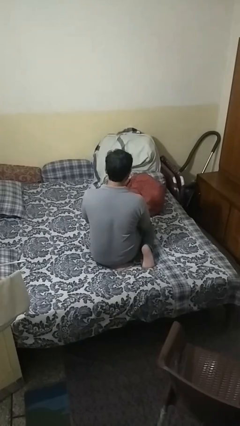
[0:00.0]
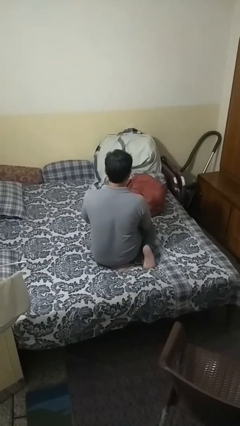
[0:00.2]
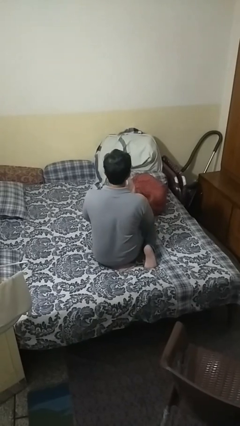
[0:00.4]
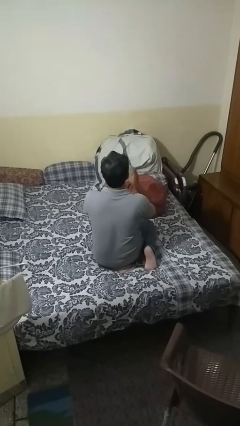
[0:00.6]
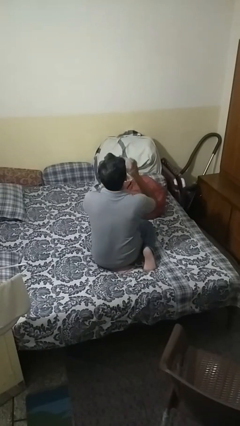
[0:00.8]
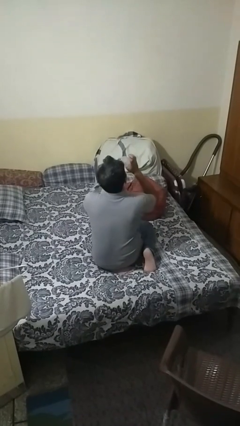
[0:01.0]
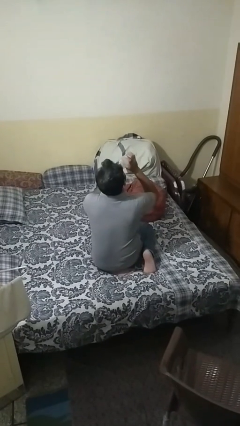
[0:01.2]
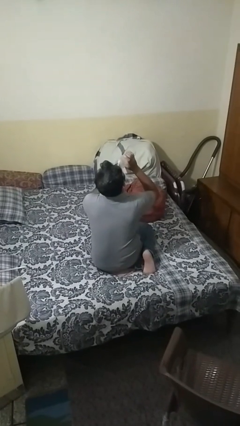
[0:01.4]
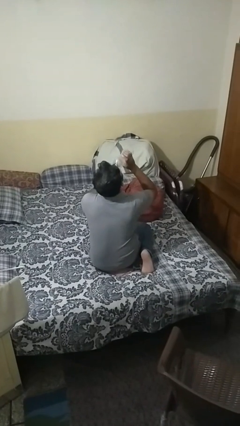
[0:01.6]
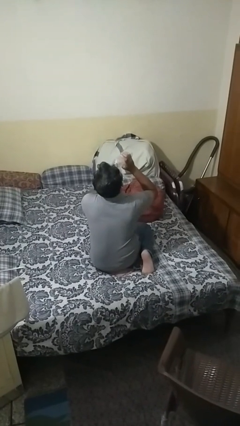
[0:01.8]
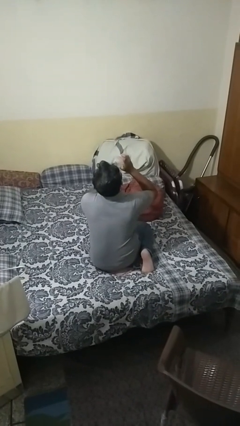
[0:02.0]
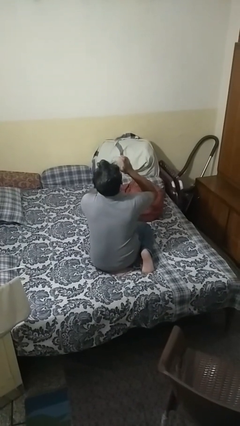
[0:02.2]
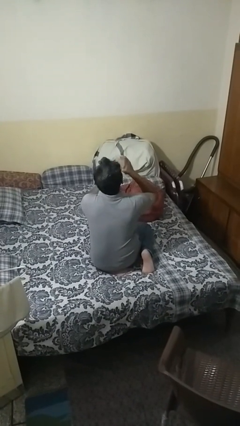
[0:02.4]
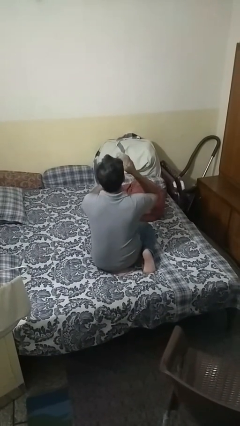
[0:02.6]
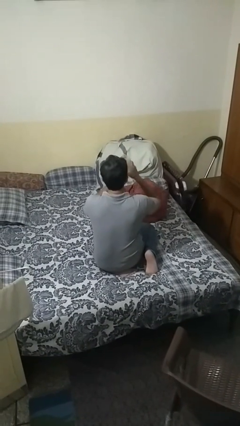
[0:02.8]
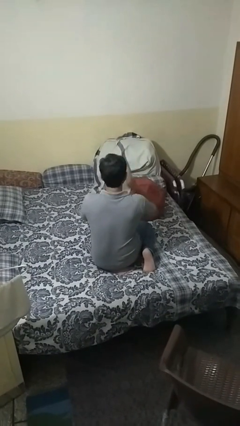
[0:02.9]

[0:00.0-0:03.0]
person drinks from bottle

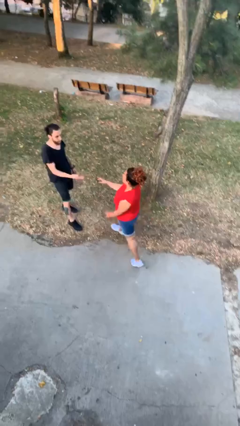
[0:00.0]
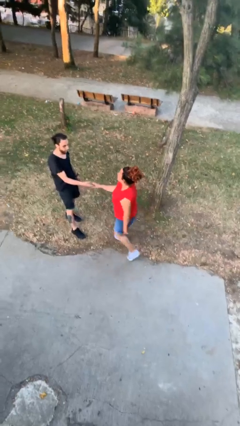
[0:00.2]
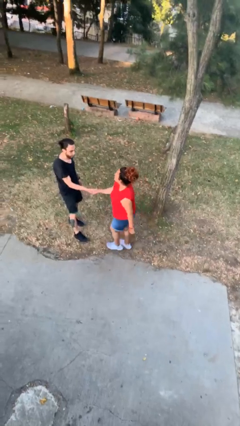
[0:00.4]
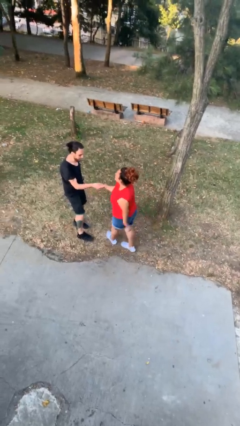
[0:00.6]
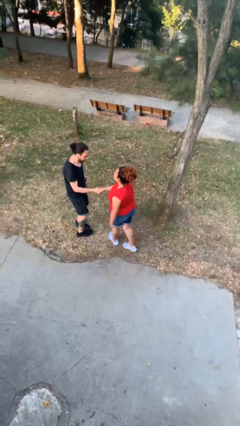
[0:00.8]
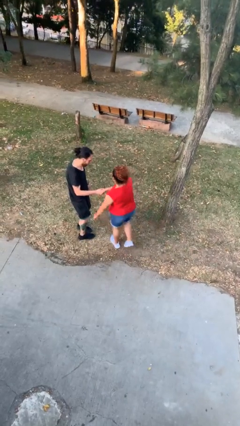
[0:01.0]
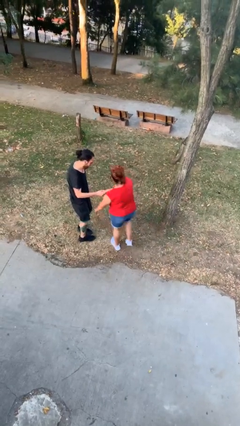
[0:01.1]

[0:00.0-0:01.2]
person shakes hand

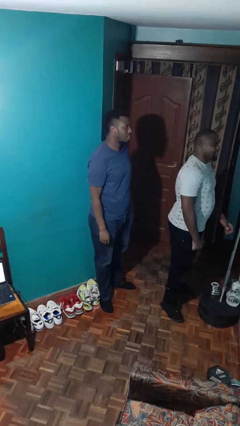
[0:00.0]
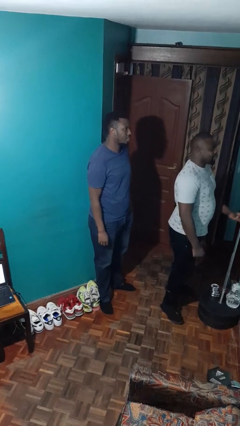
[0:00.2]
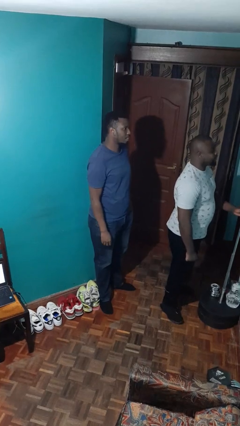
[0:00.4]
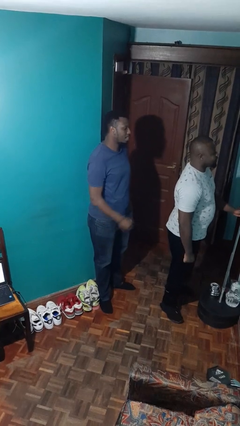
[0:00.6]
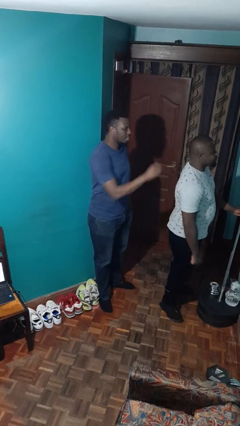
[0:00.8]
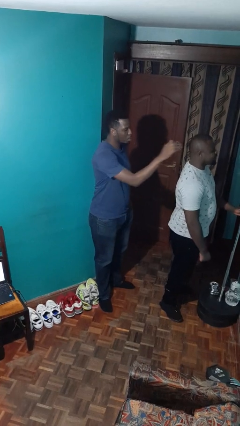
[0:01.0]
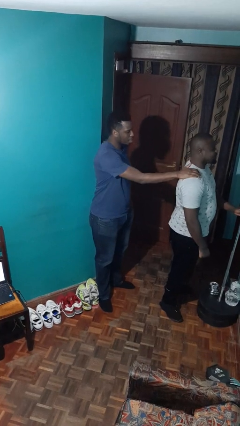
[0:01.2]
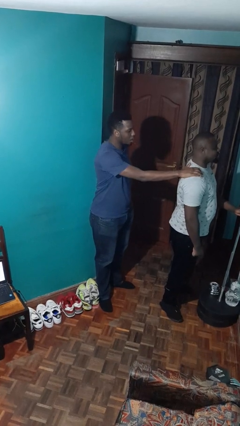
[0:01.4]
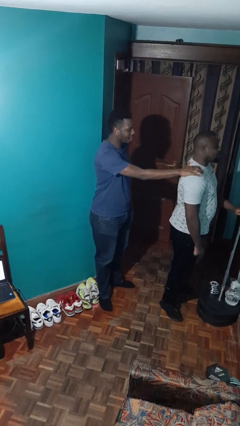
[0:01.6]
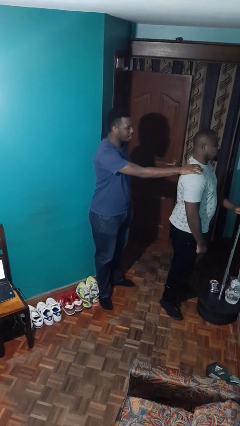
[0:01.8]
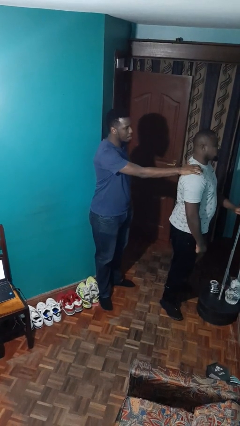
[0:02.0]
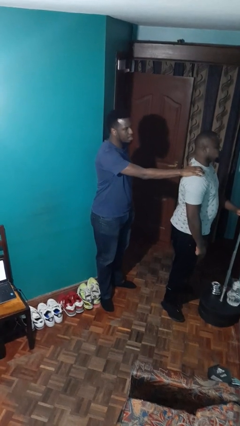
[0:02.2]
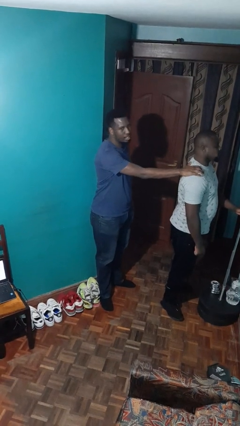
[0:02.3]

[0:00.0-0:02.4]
person grabs person by shoulder

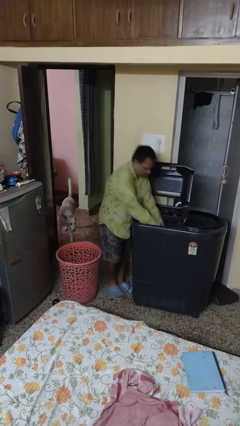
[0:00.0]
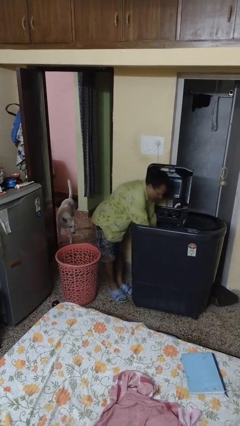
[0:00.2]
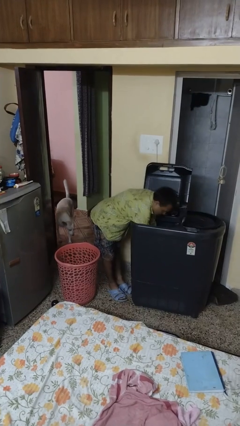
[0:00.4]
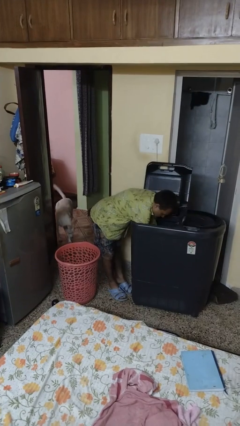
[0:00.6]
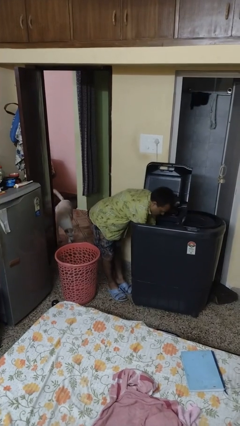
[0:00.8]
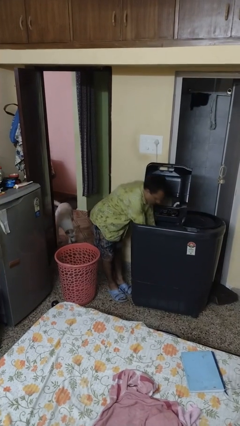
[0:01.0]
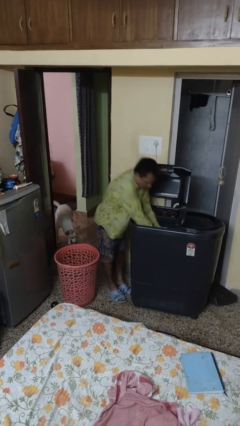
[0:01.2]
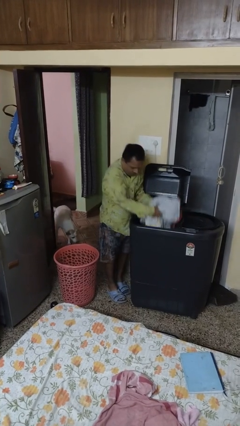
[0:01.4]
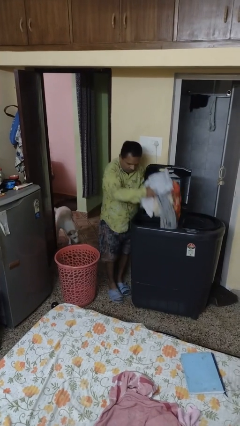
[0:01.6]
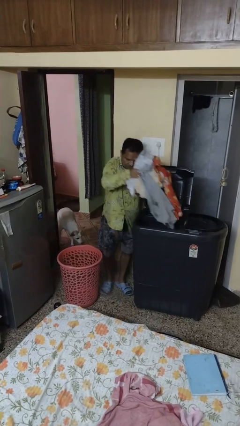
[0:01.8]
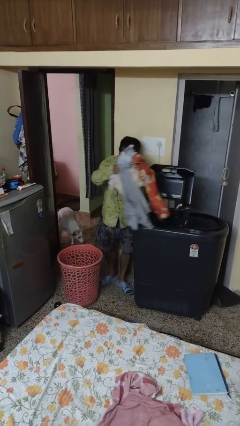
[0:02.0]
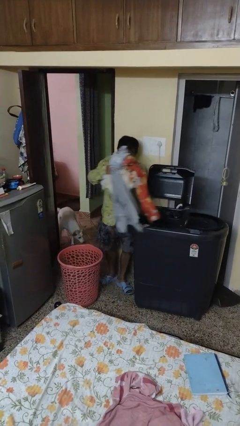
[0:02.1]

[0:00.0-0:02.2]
person unloads clotheswasher

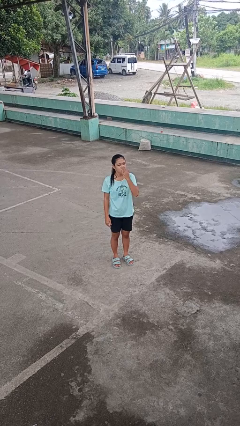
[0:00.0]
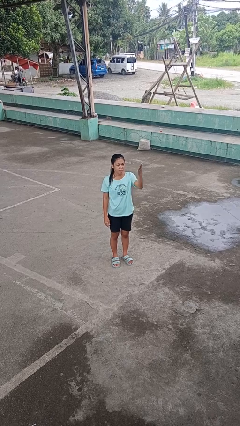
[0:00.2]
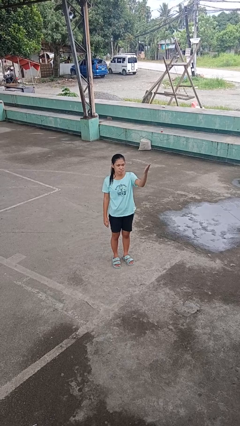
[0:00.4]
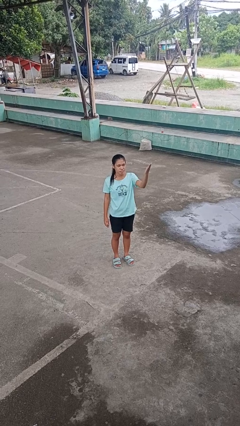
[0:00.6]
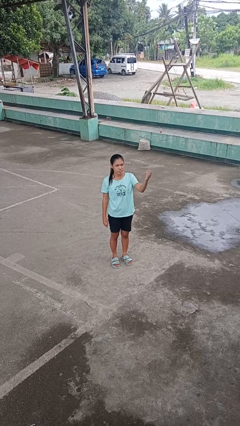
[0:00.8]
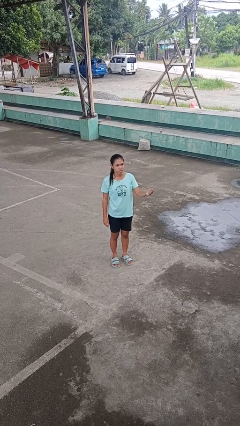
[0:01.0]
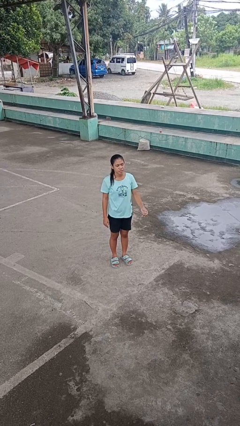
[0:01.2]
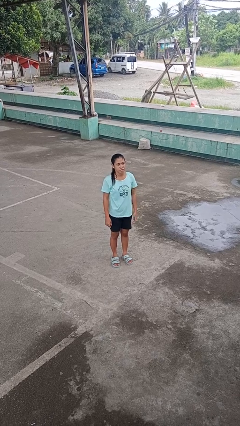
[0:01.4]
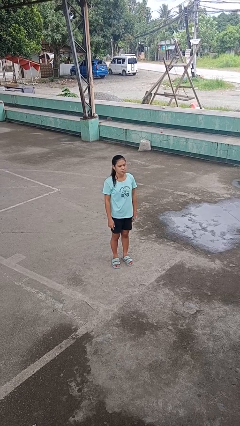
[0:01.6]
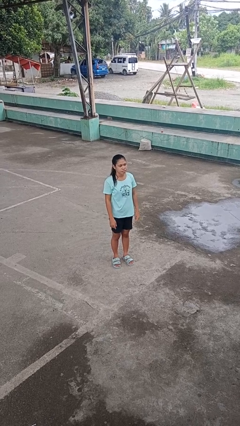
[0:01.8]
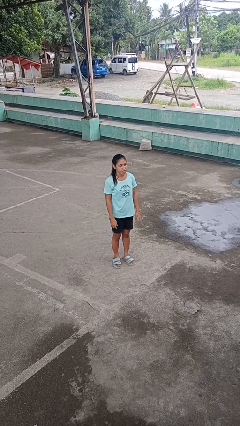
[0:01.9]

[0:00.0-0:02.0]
person gestures blow kiss

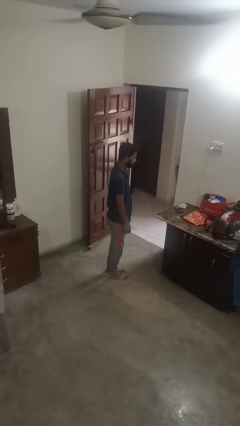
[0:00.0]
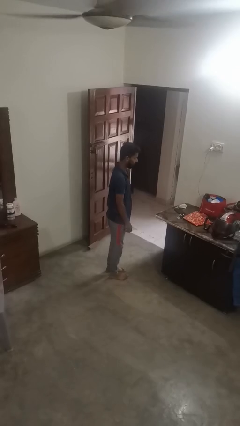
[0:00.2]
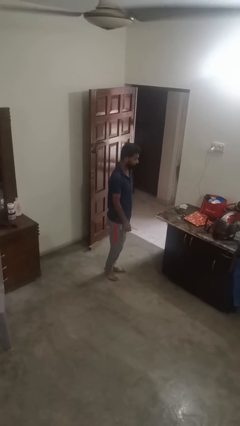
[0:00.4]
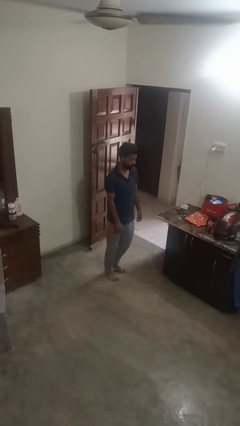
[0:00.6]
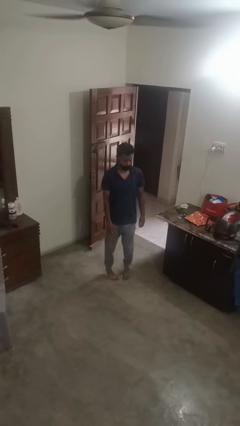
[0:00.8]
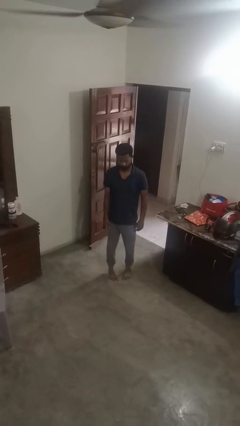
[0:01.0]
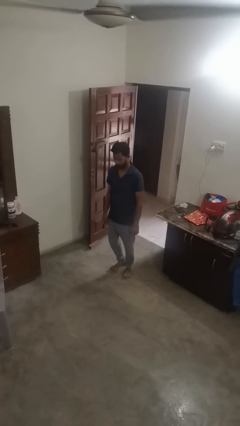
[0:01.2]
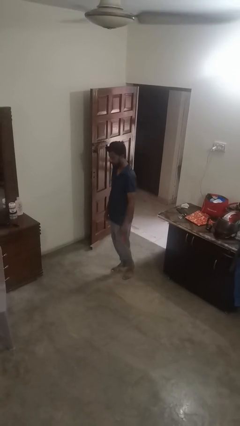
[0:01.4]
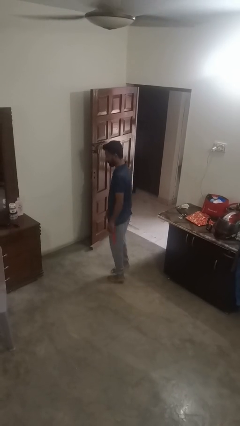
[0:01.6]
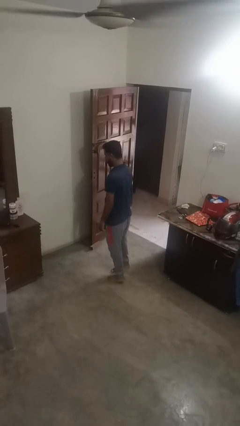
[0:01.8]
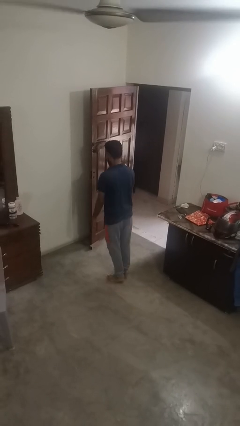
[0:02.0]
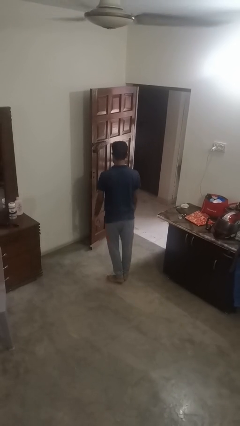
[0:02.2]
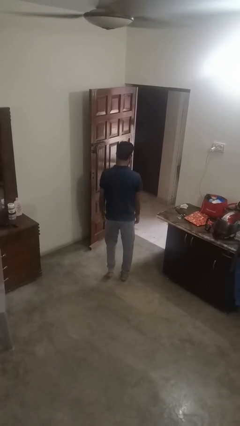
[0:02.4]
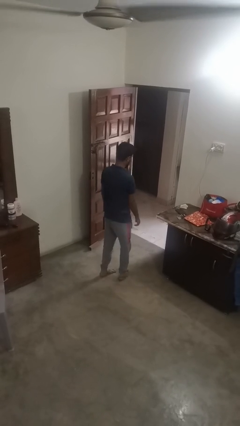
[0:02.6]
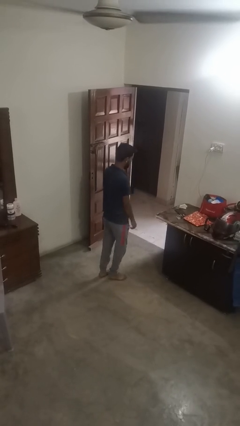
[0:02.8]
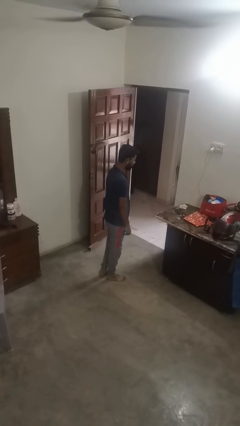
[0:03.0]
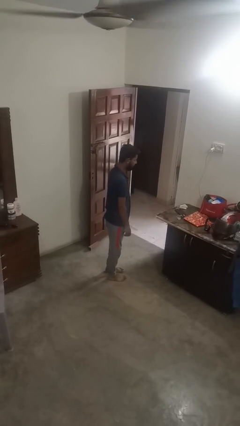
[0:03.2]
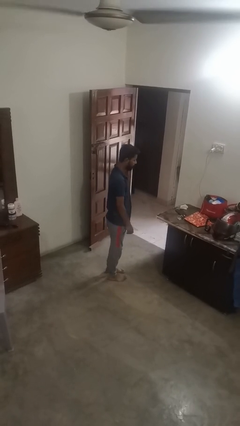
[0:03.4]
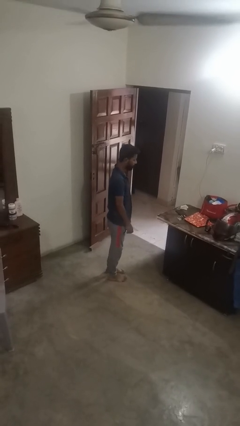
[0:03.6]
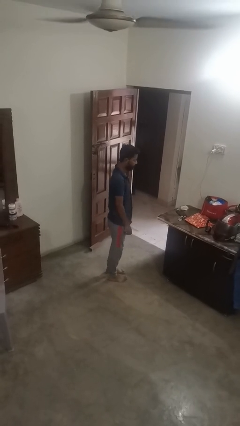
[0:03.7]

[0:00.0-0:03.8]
person twirls

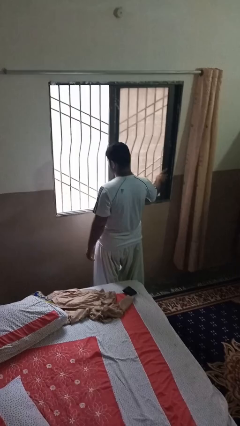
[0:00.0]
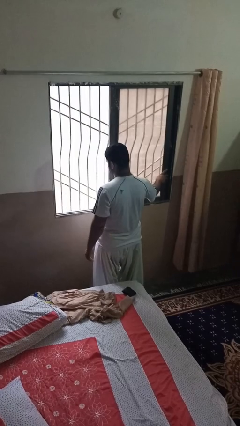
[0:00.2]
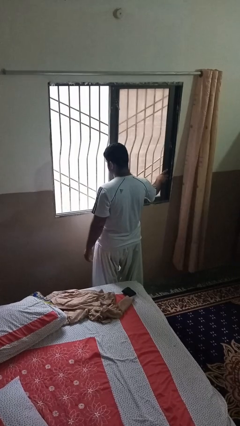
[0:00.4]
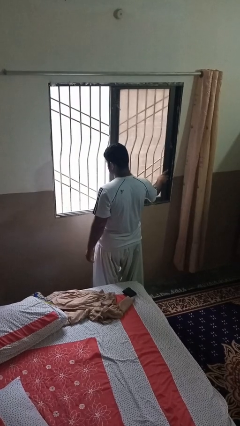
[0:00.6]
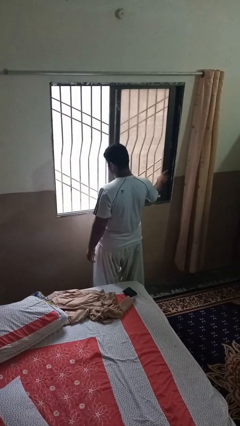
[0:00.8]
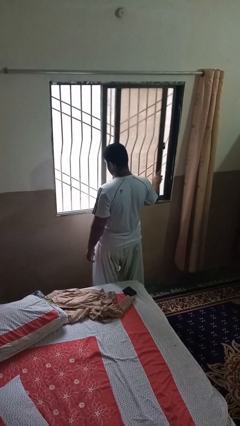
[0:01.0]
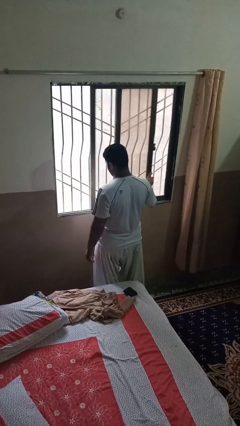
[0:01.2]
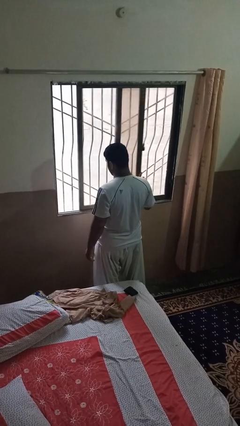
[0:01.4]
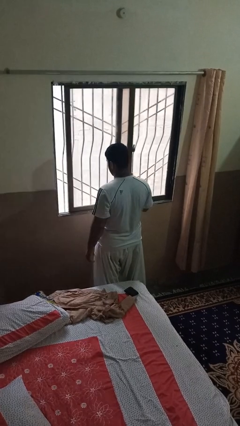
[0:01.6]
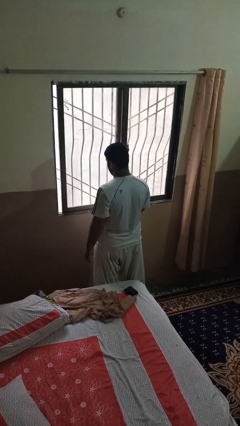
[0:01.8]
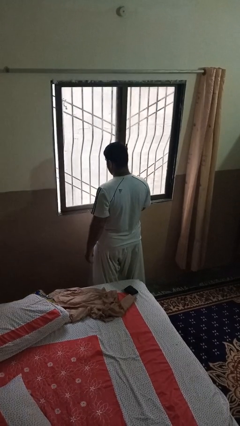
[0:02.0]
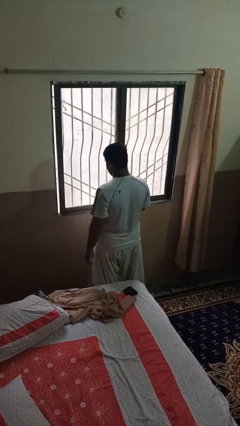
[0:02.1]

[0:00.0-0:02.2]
person closes home window
